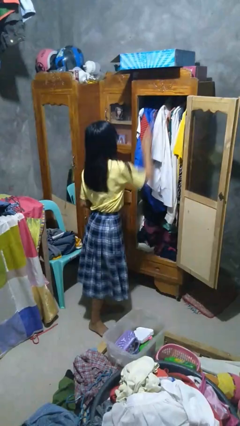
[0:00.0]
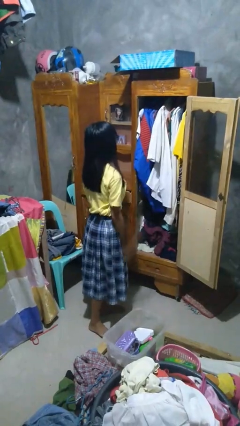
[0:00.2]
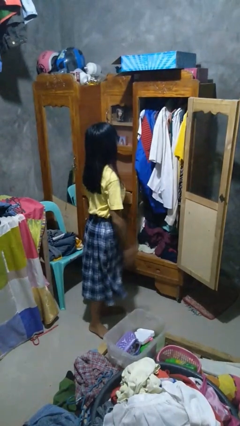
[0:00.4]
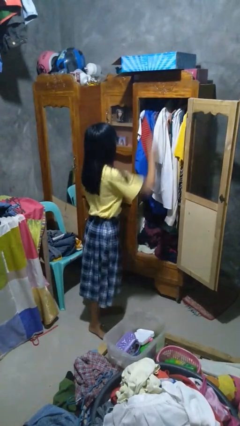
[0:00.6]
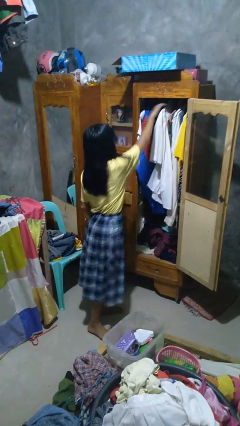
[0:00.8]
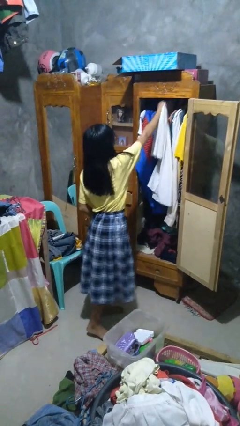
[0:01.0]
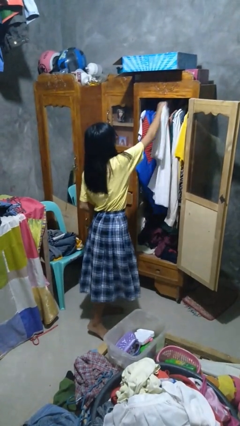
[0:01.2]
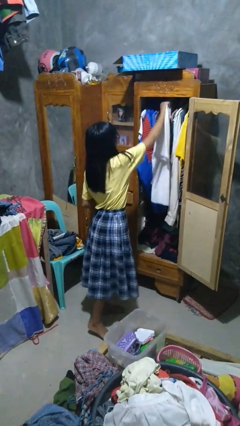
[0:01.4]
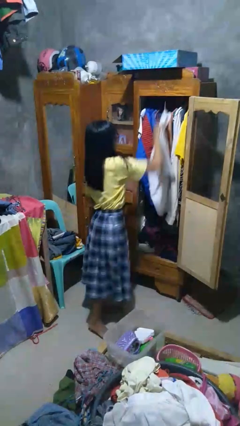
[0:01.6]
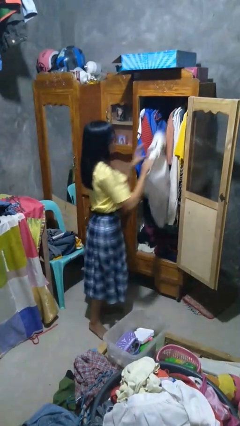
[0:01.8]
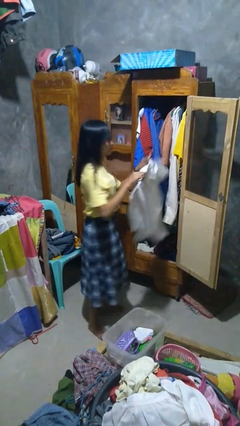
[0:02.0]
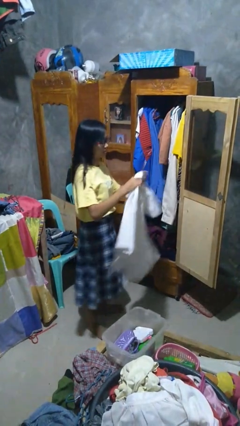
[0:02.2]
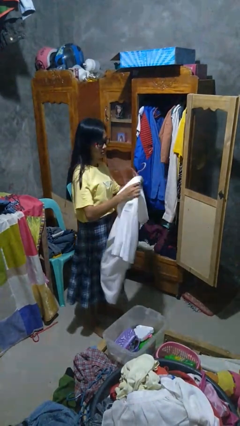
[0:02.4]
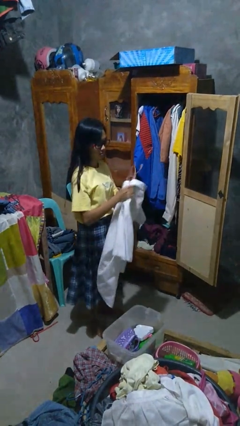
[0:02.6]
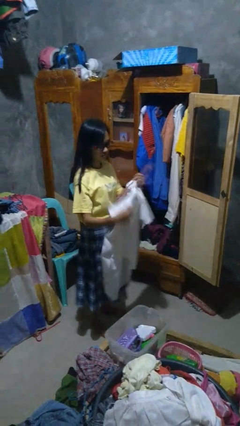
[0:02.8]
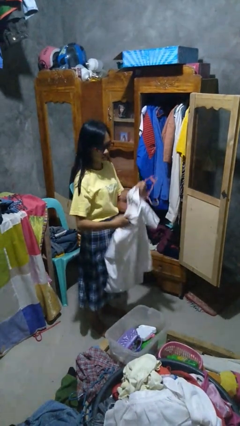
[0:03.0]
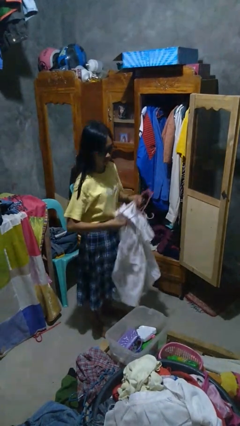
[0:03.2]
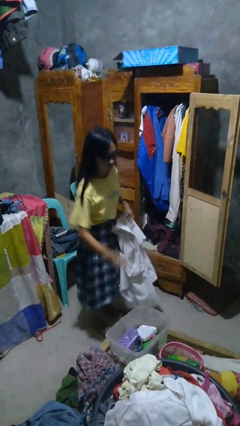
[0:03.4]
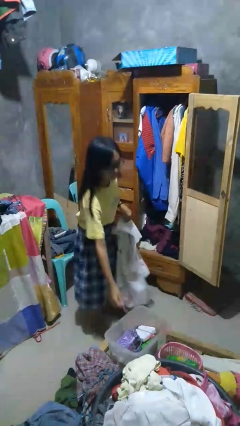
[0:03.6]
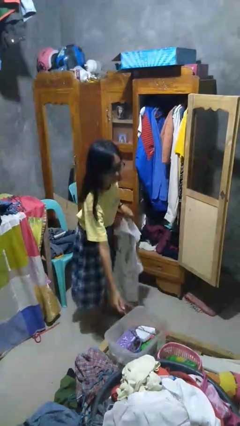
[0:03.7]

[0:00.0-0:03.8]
person takes clothes from closet

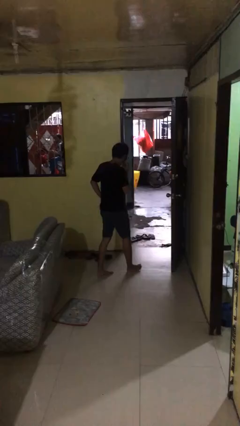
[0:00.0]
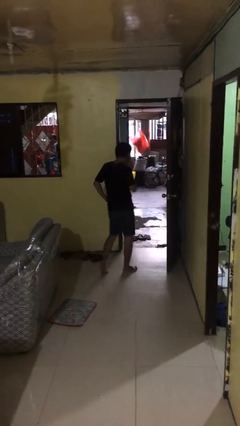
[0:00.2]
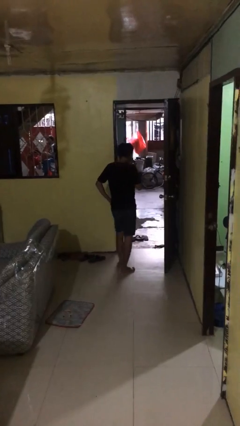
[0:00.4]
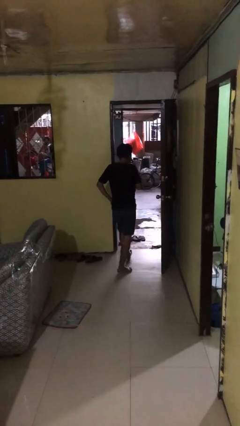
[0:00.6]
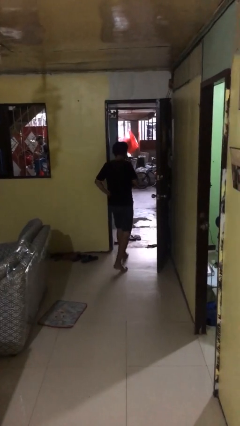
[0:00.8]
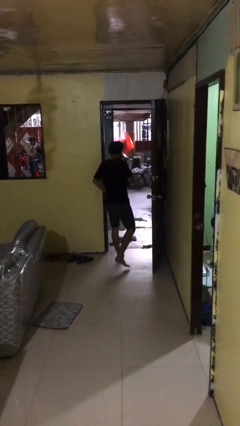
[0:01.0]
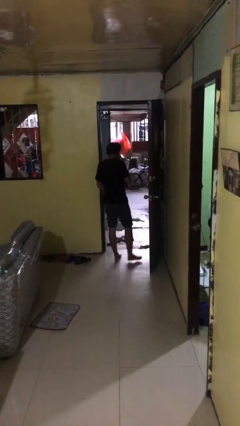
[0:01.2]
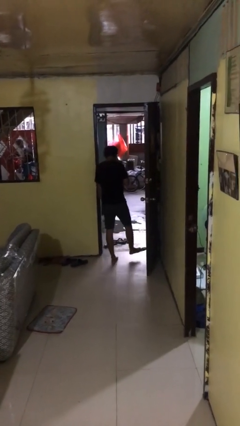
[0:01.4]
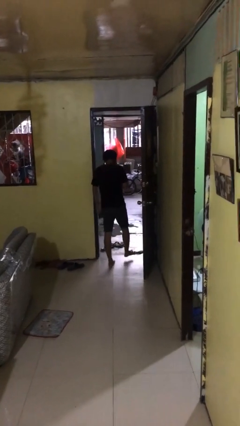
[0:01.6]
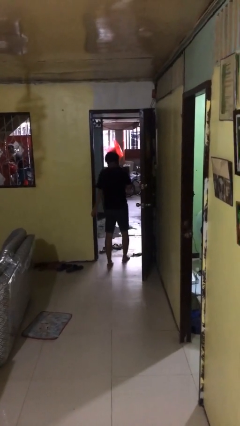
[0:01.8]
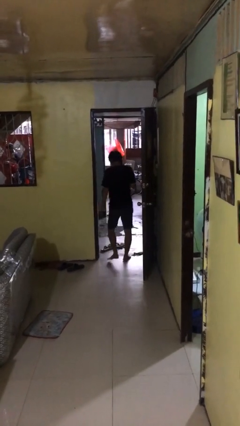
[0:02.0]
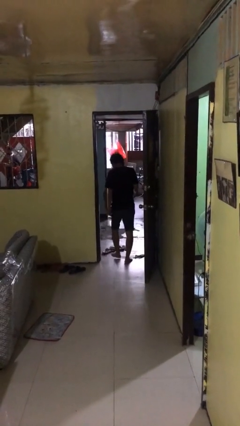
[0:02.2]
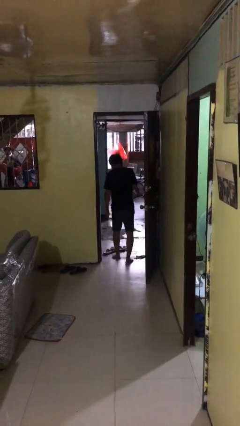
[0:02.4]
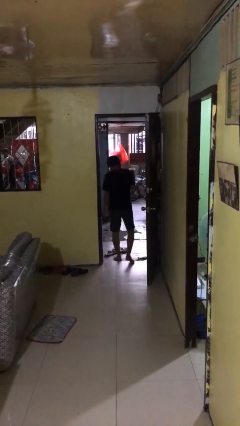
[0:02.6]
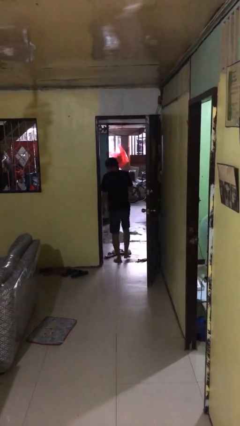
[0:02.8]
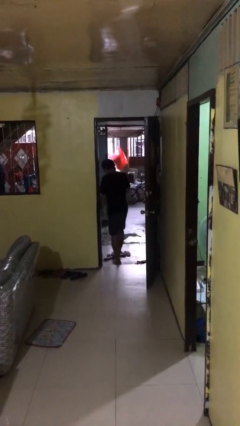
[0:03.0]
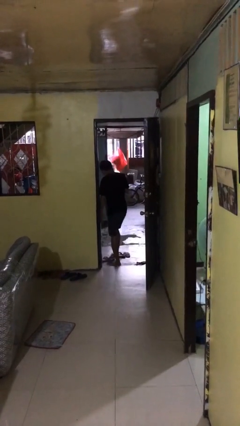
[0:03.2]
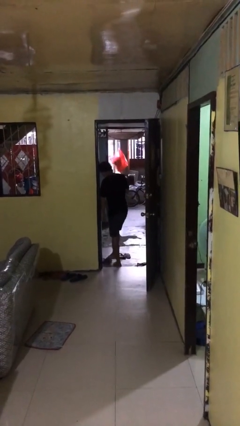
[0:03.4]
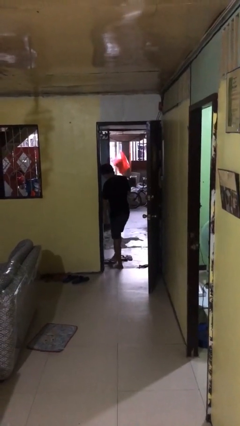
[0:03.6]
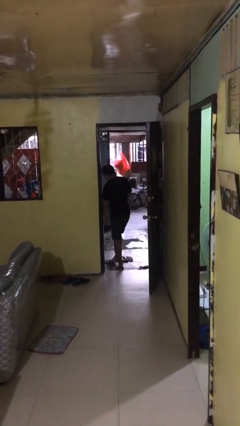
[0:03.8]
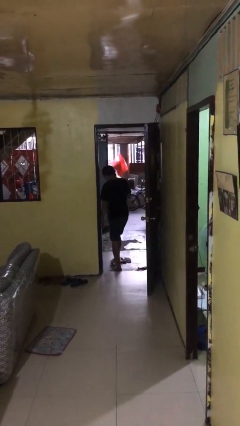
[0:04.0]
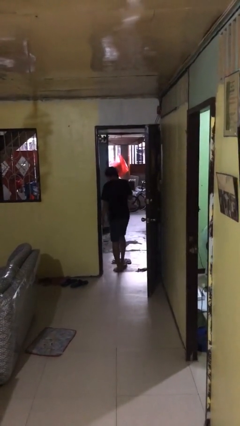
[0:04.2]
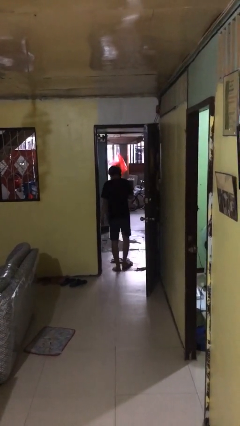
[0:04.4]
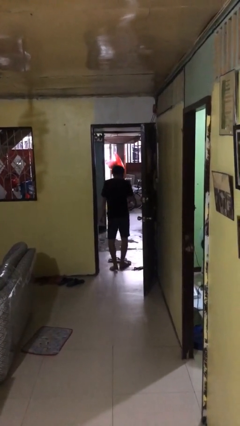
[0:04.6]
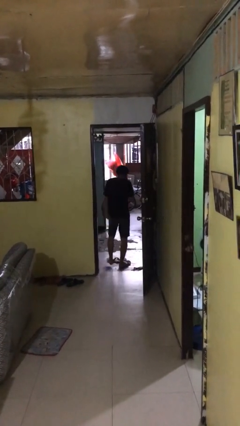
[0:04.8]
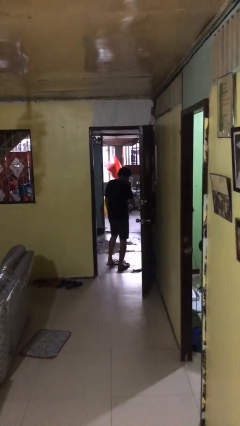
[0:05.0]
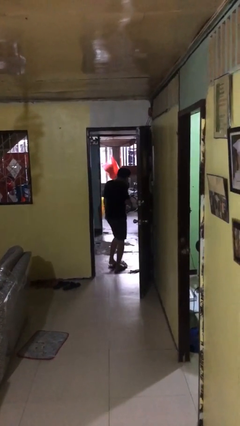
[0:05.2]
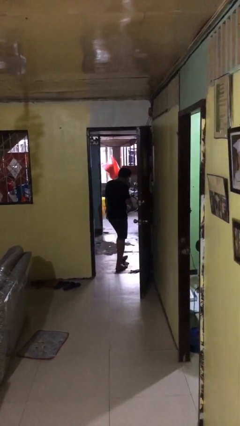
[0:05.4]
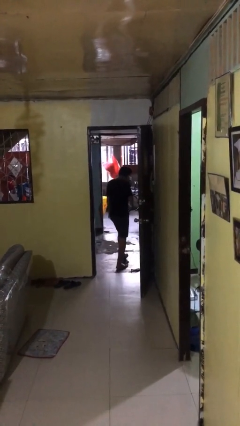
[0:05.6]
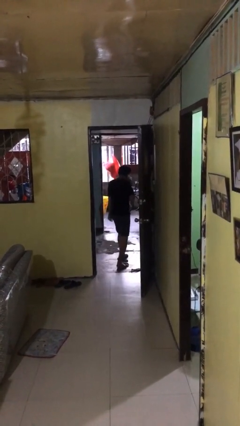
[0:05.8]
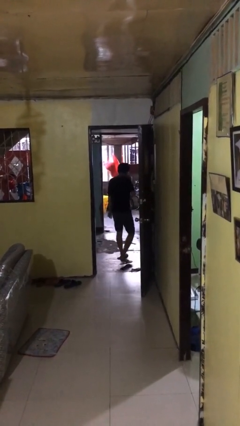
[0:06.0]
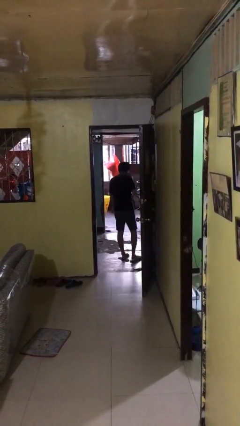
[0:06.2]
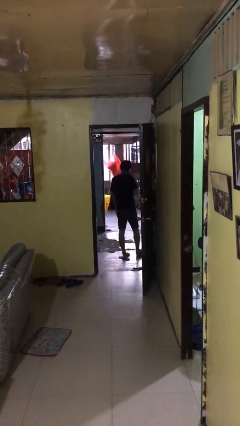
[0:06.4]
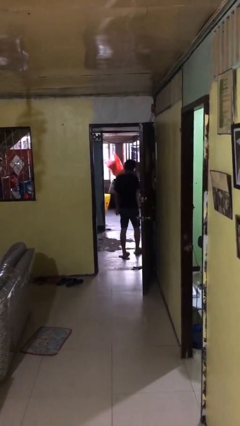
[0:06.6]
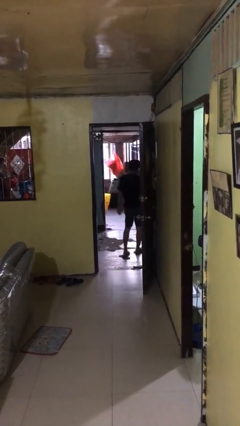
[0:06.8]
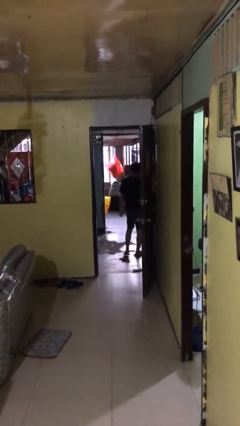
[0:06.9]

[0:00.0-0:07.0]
person exits scene through structure

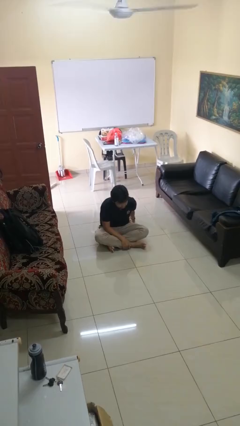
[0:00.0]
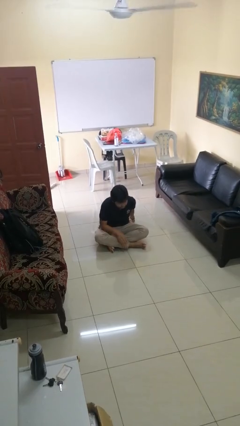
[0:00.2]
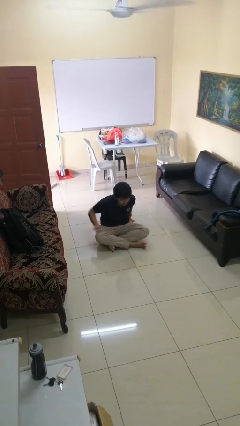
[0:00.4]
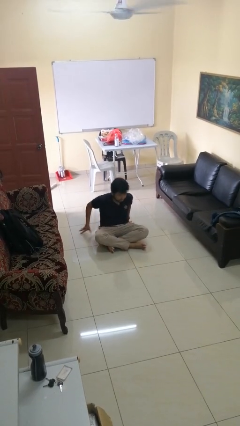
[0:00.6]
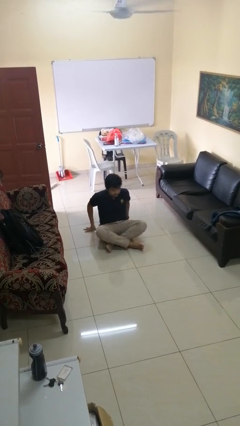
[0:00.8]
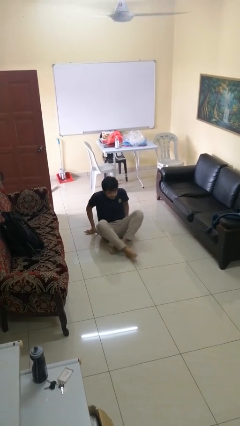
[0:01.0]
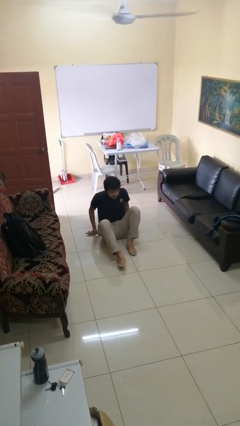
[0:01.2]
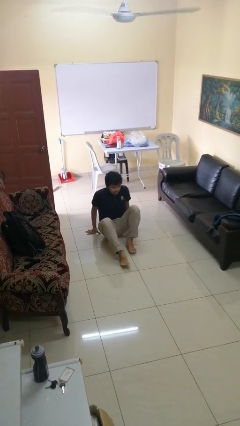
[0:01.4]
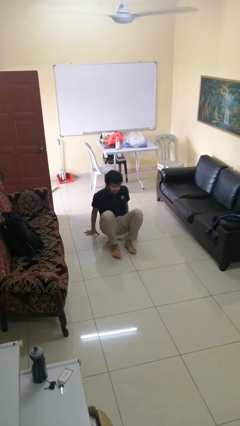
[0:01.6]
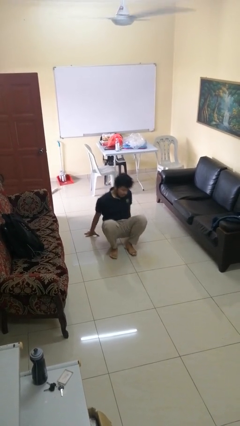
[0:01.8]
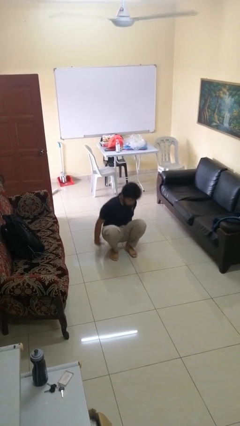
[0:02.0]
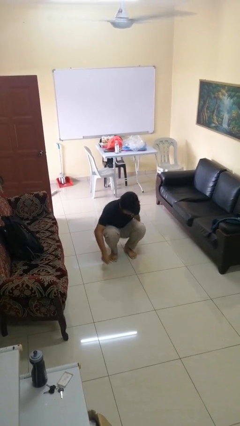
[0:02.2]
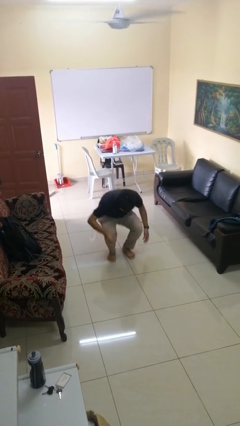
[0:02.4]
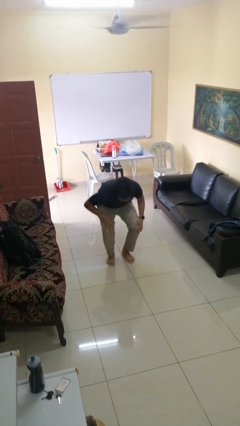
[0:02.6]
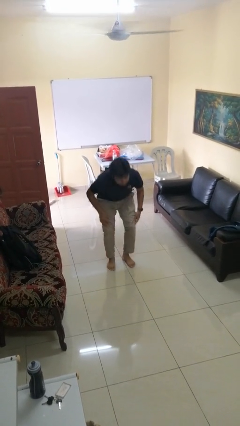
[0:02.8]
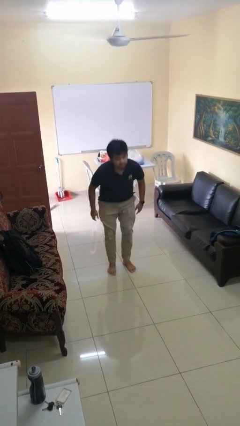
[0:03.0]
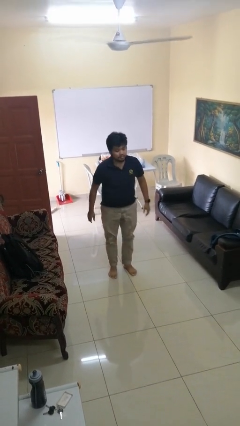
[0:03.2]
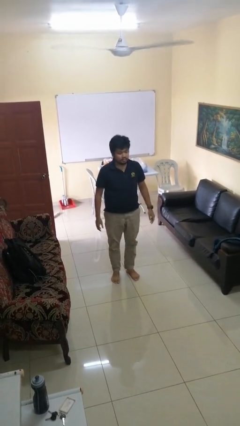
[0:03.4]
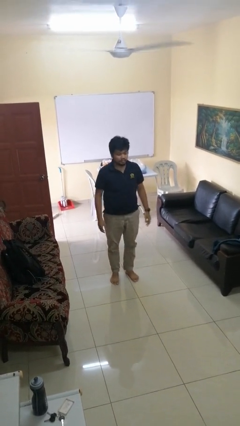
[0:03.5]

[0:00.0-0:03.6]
person stands up from floor

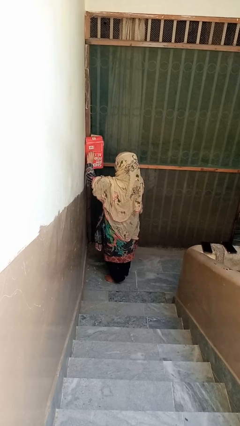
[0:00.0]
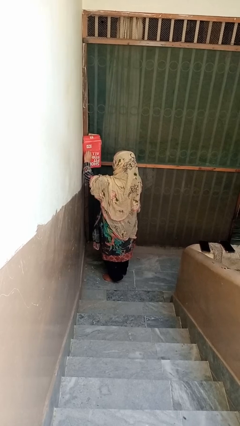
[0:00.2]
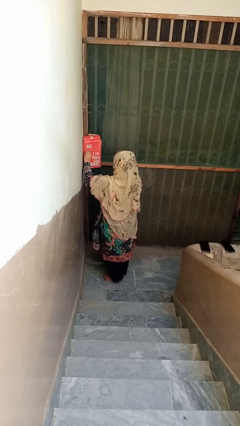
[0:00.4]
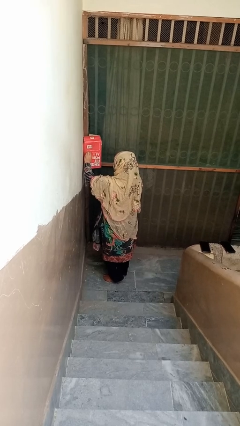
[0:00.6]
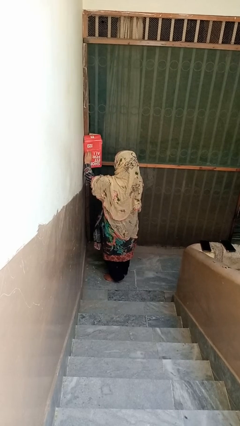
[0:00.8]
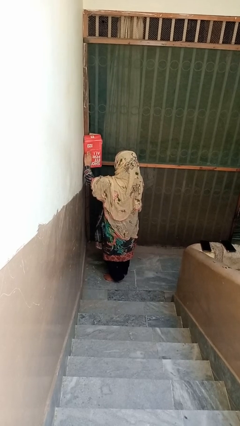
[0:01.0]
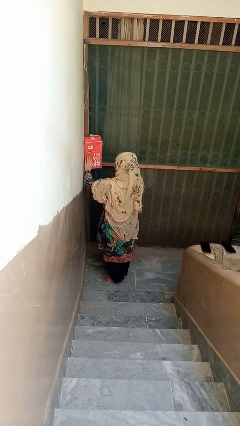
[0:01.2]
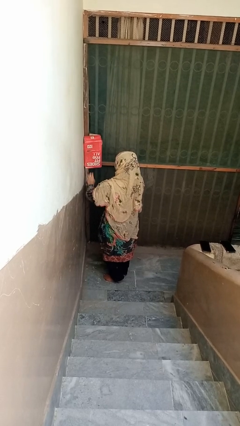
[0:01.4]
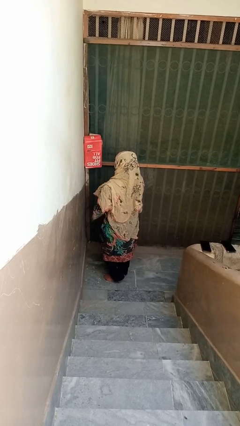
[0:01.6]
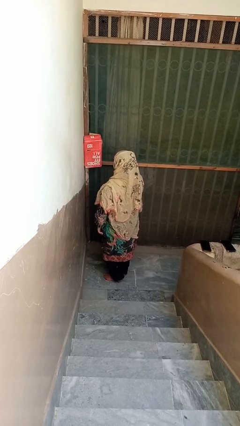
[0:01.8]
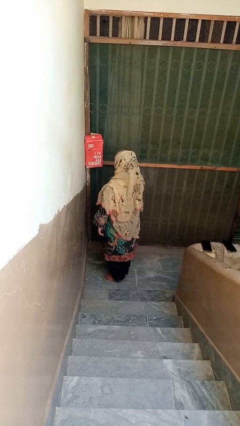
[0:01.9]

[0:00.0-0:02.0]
person closes mailbox

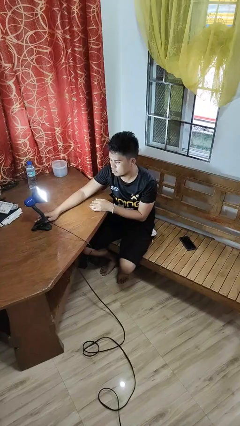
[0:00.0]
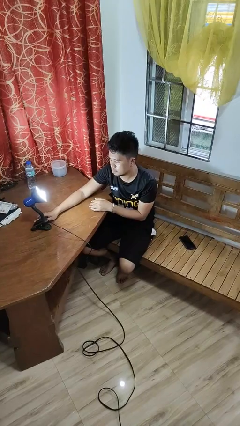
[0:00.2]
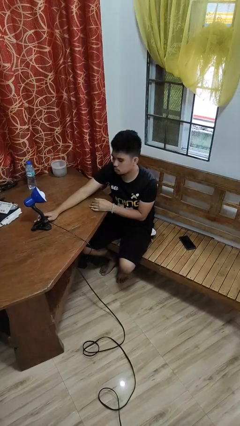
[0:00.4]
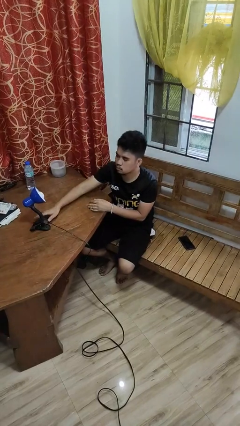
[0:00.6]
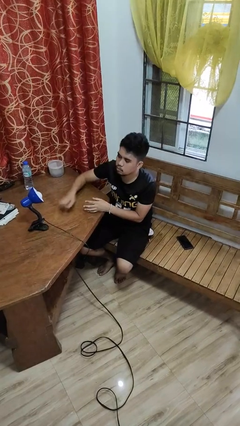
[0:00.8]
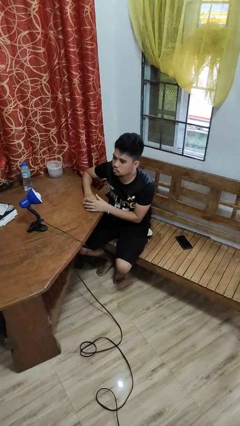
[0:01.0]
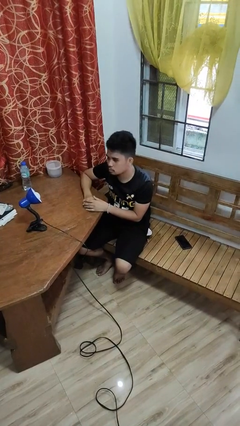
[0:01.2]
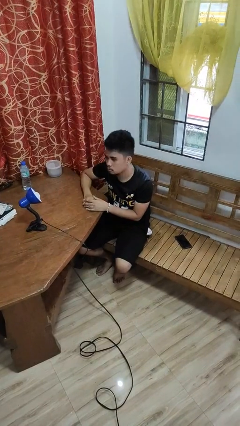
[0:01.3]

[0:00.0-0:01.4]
person turns off lamp

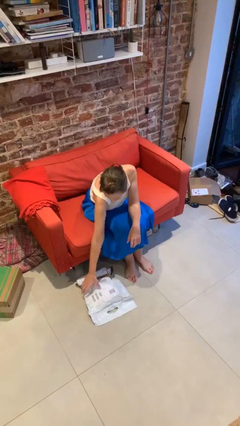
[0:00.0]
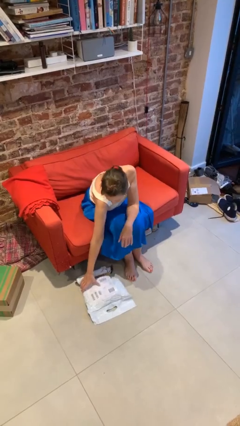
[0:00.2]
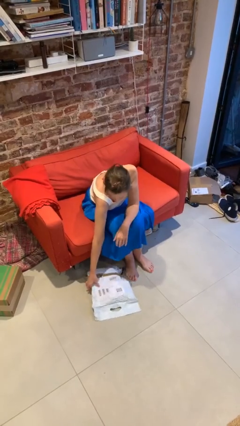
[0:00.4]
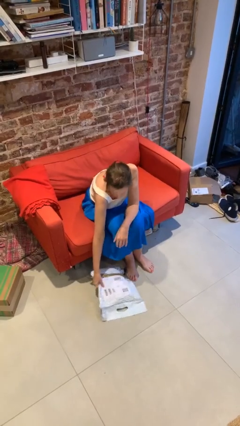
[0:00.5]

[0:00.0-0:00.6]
person picks up object from floor
